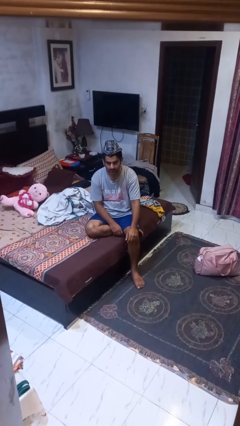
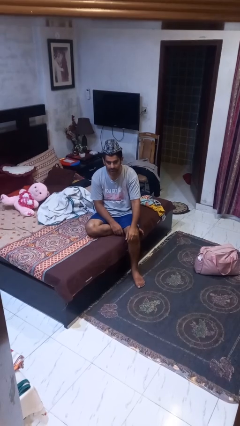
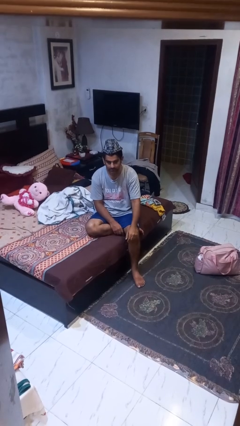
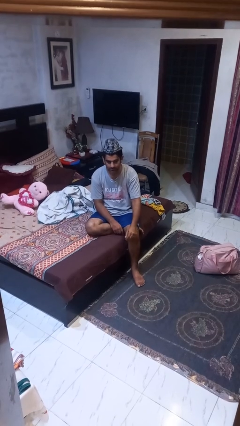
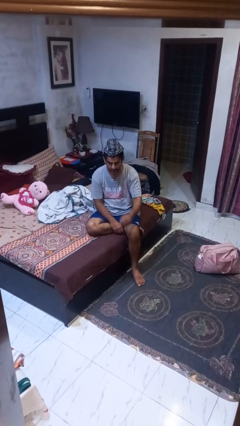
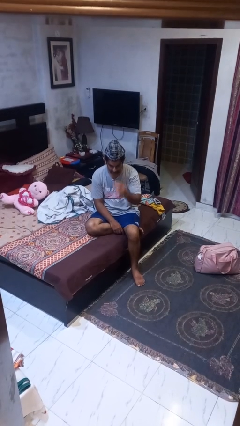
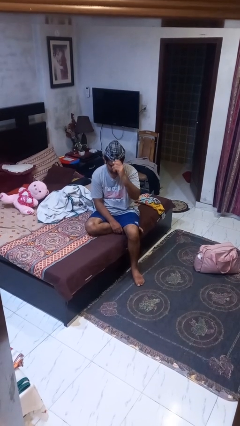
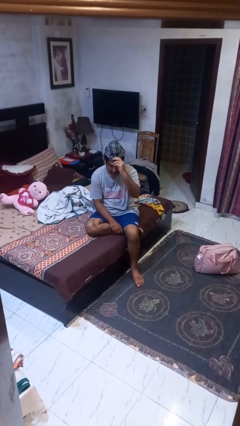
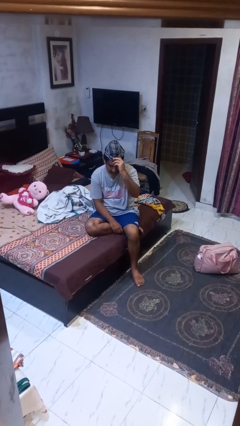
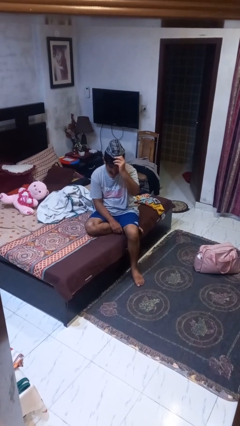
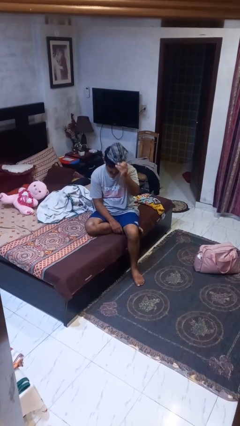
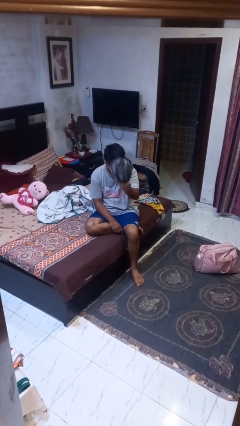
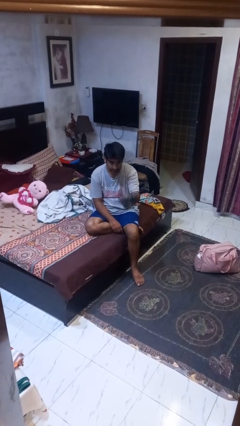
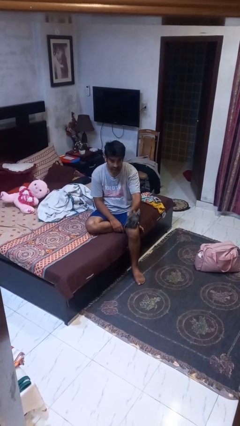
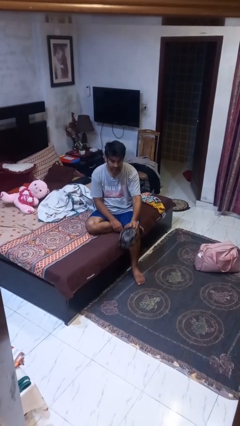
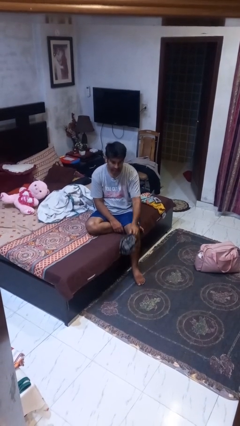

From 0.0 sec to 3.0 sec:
person takes off hat

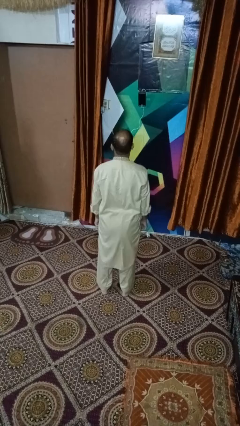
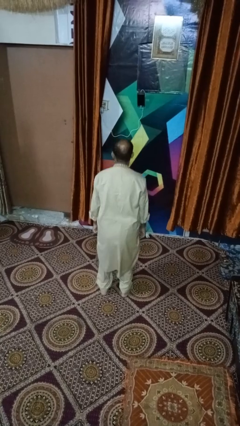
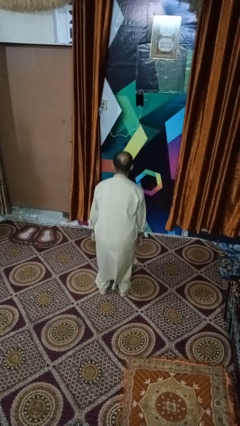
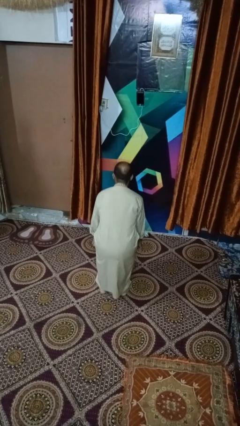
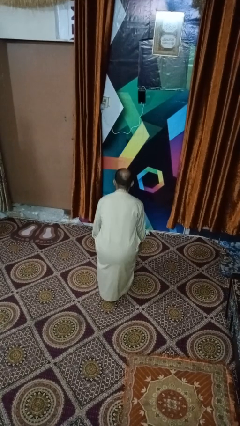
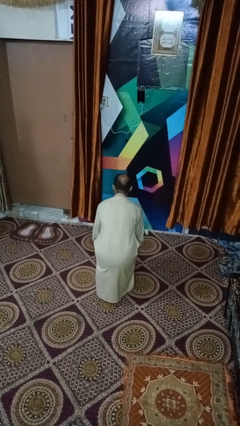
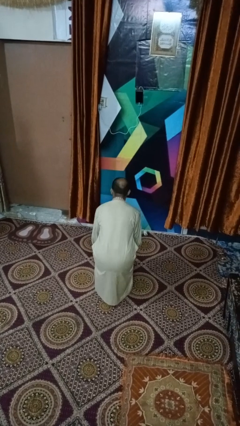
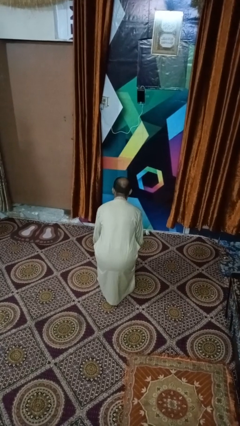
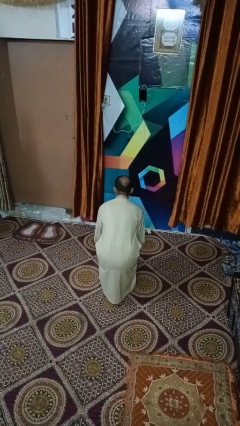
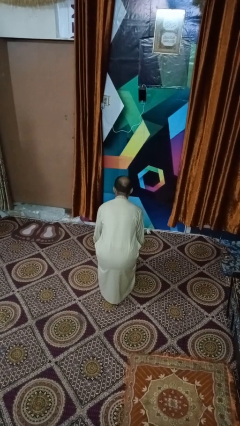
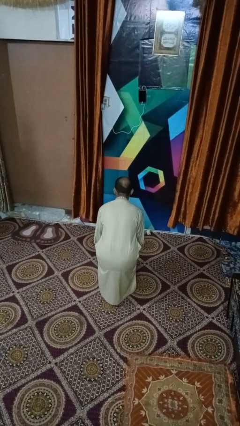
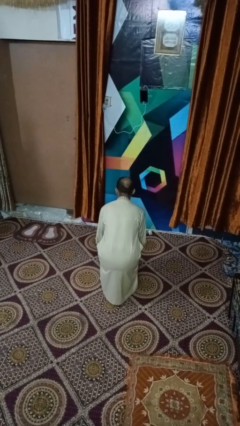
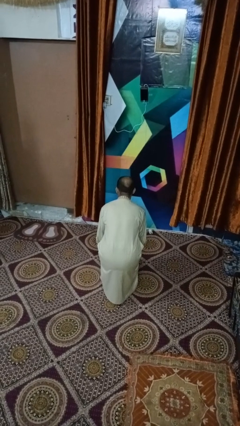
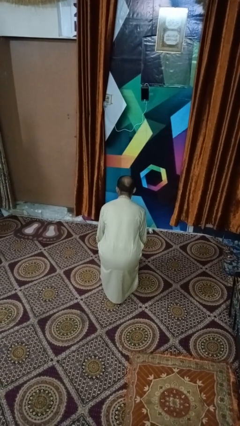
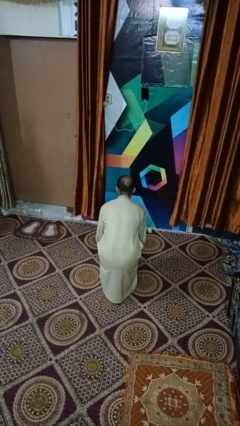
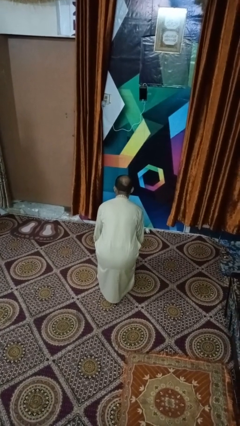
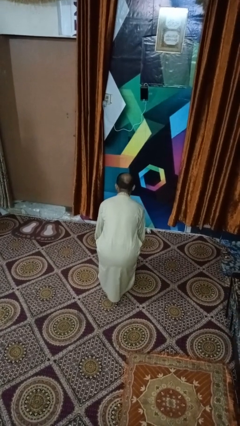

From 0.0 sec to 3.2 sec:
person squats

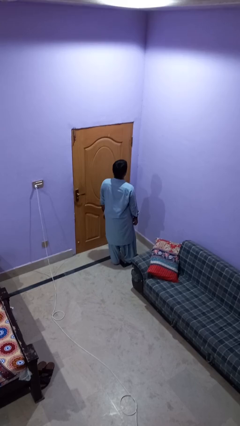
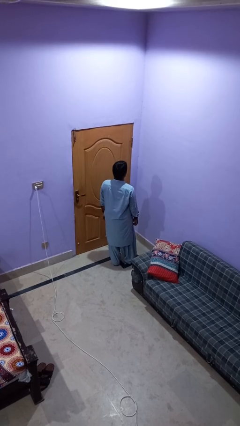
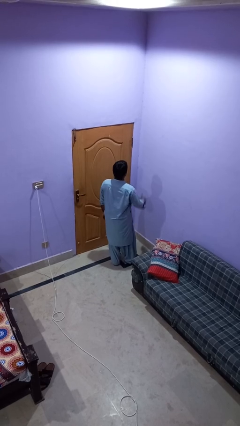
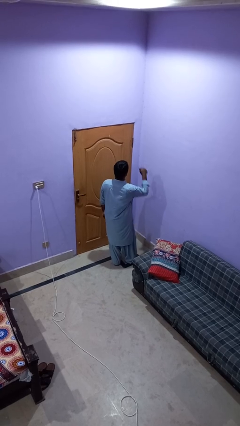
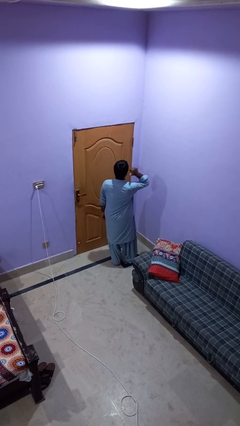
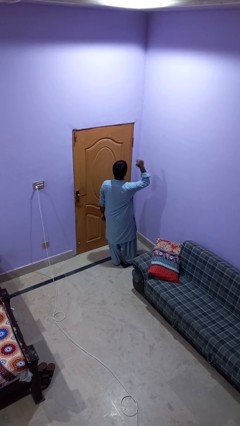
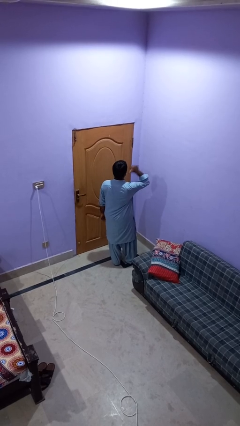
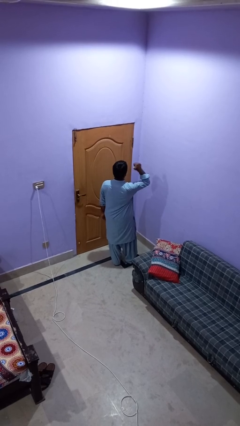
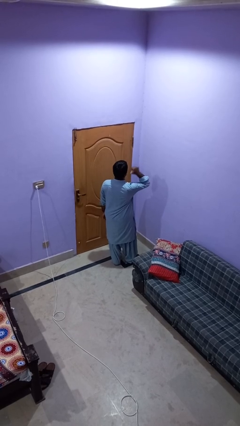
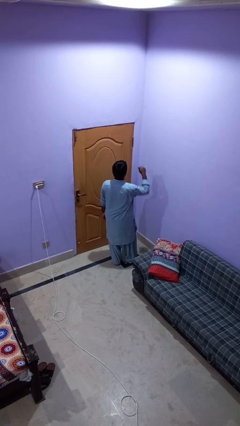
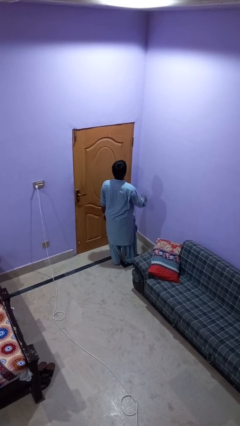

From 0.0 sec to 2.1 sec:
person gestures behind me

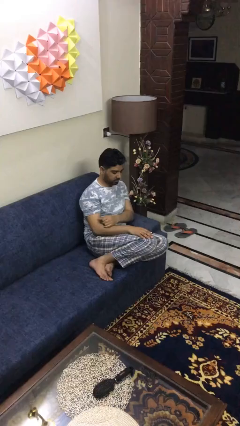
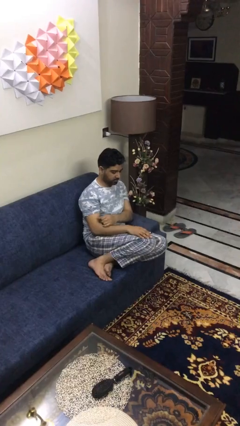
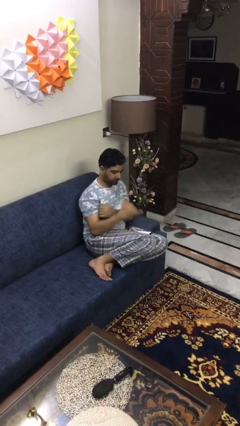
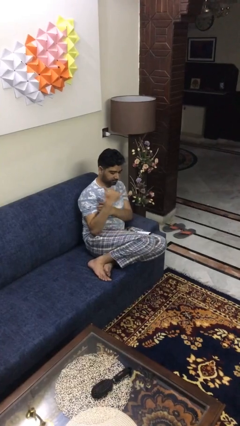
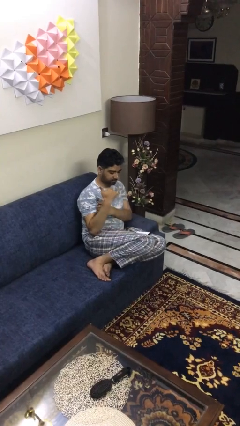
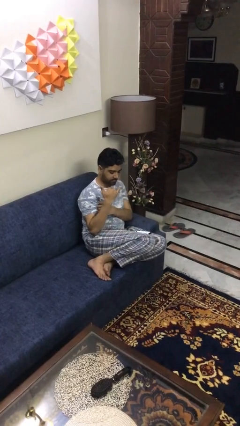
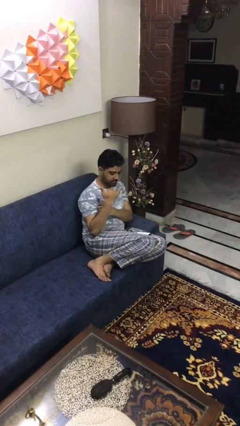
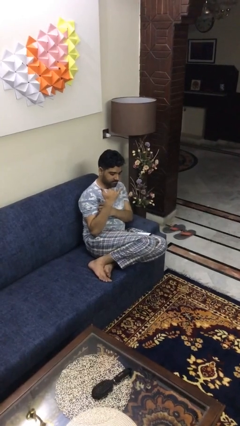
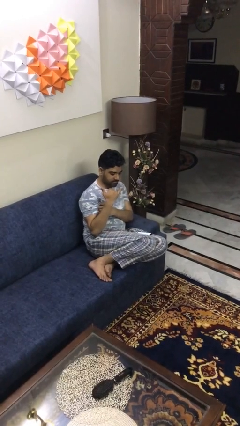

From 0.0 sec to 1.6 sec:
person gestures hang loose

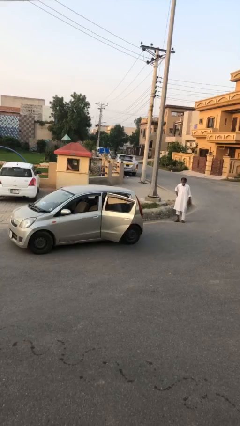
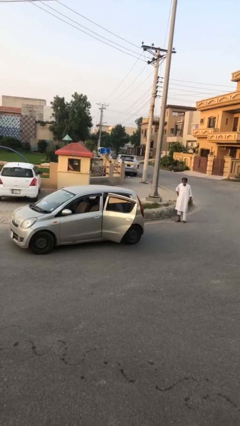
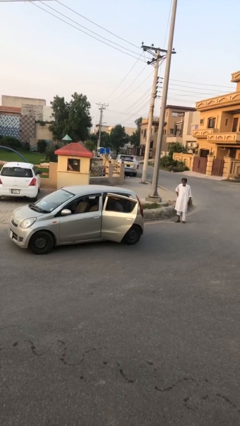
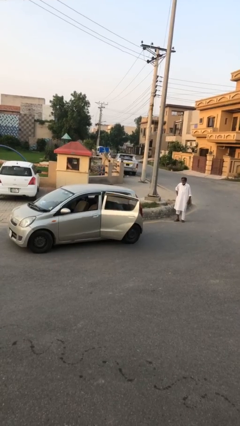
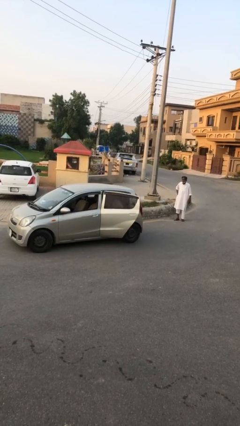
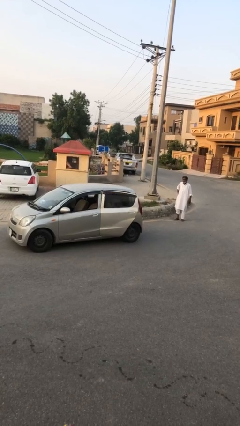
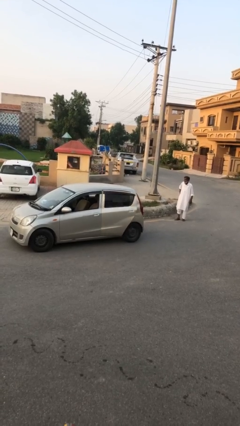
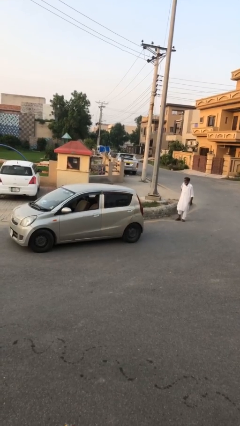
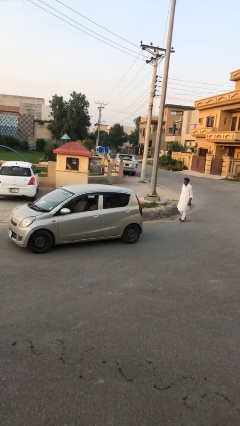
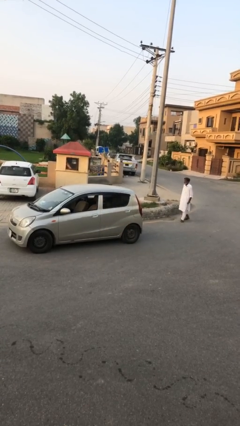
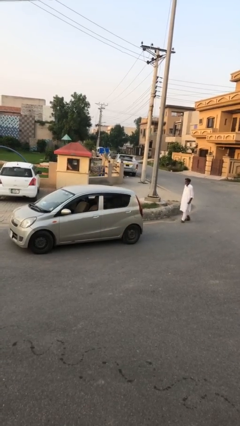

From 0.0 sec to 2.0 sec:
person closes car door

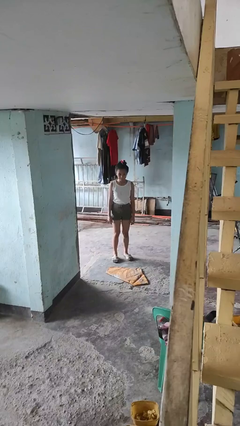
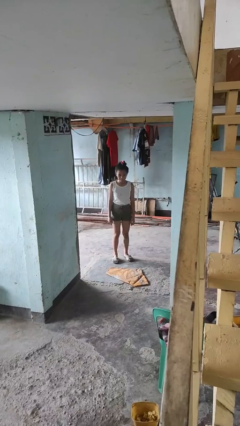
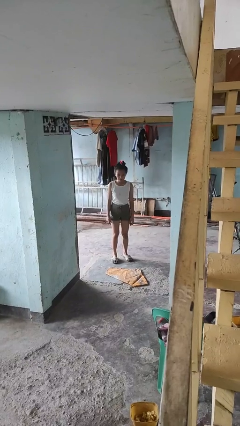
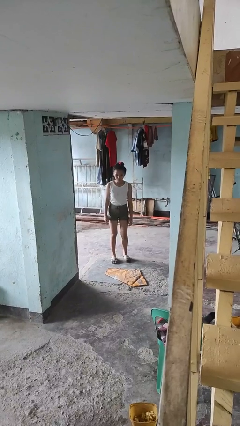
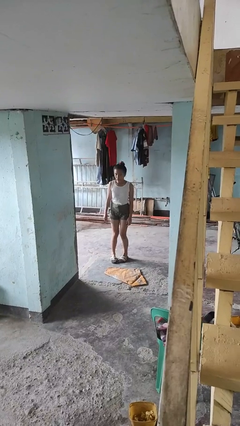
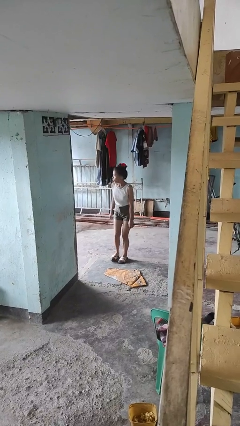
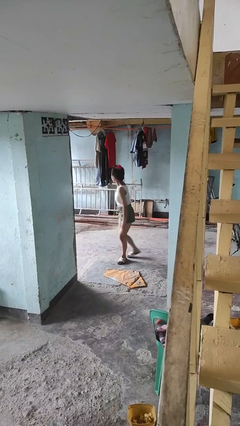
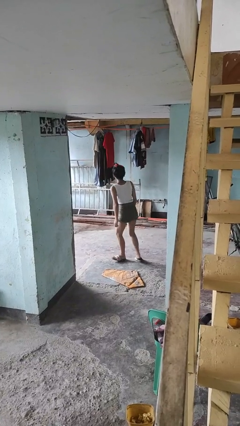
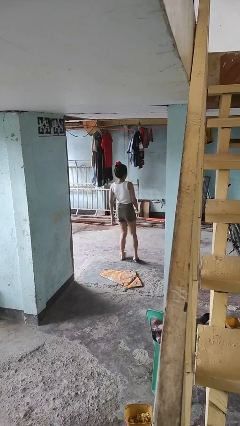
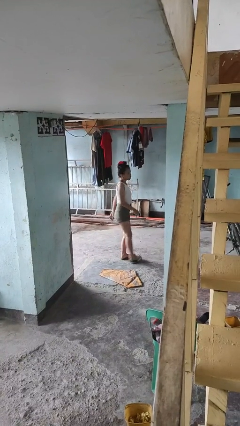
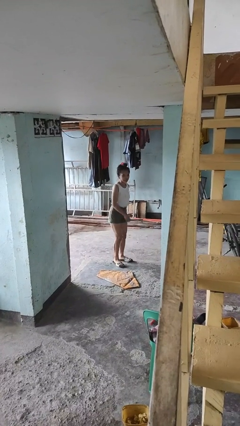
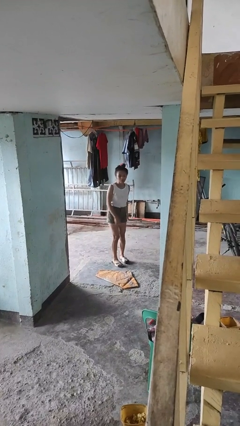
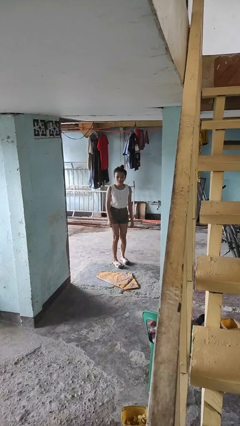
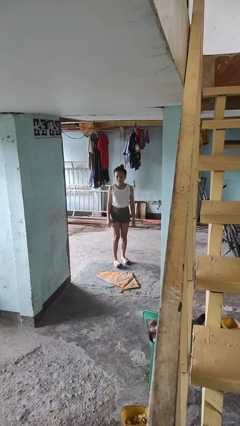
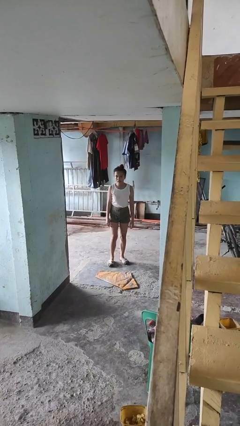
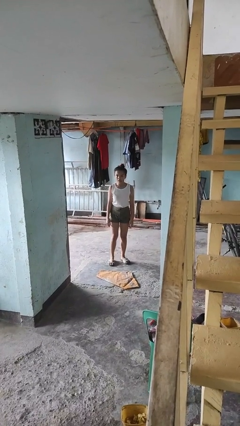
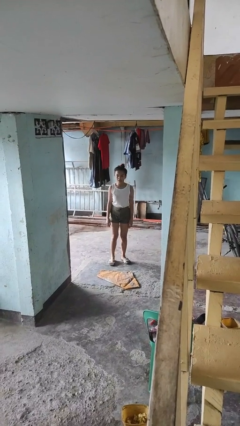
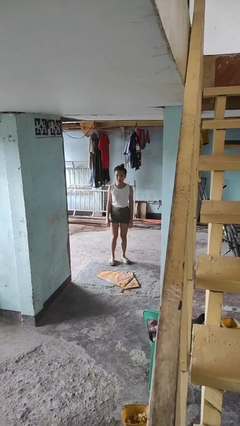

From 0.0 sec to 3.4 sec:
person twirls

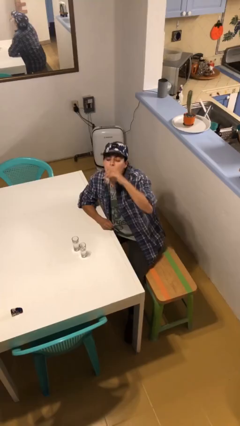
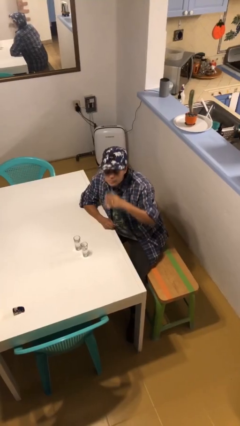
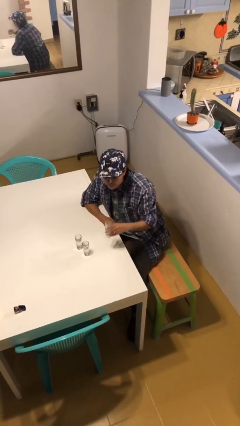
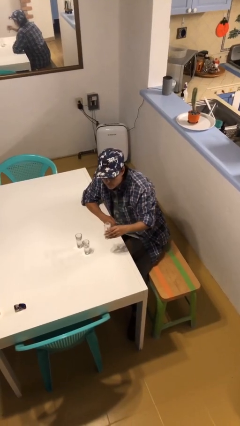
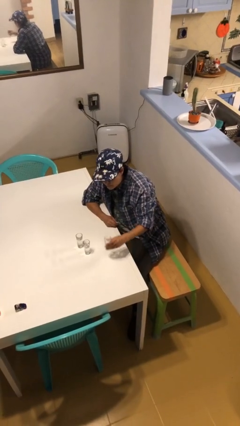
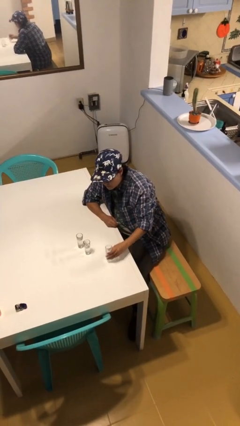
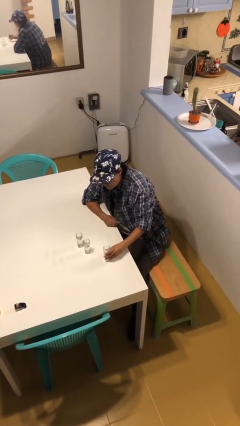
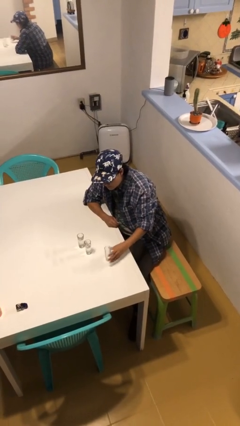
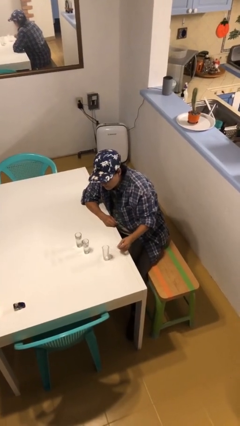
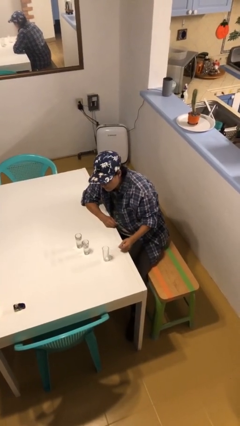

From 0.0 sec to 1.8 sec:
person puts down object on table
